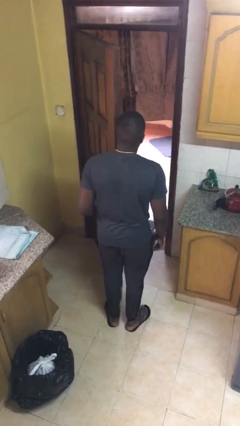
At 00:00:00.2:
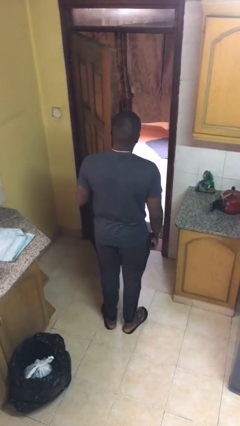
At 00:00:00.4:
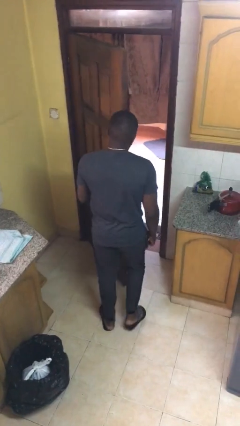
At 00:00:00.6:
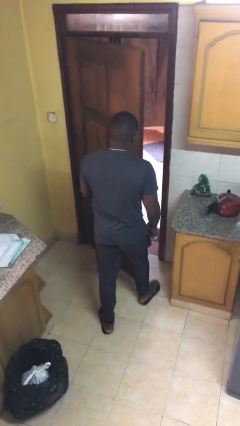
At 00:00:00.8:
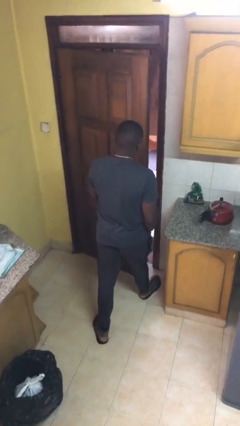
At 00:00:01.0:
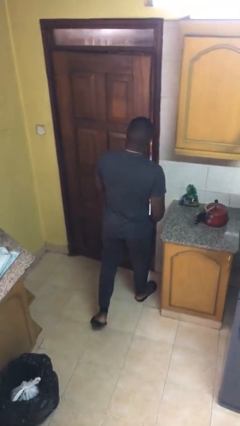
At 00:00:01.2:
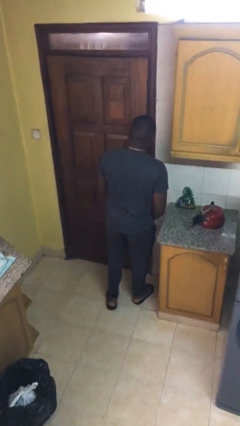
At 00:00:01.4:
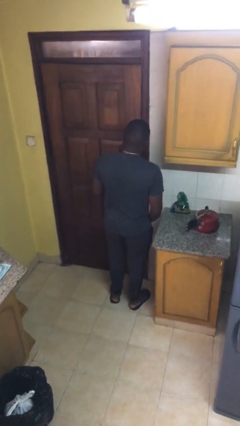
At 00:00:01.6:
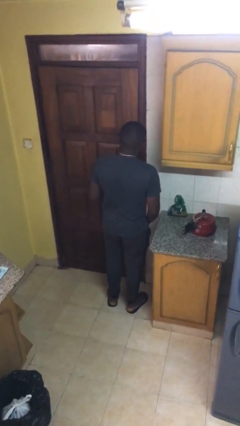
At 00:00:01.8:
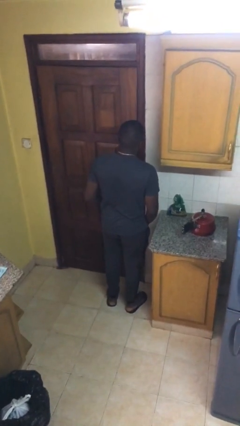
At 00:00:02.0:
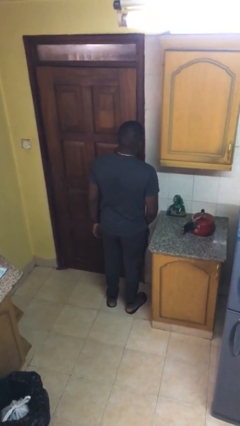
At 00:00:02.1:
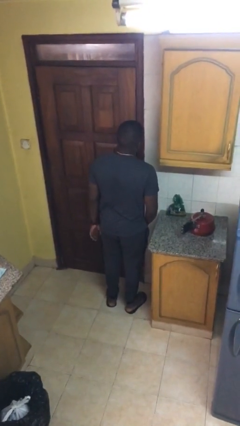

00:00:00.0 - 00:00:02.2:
person closes facility door

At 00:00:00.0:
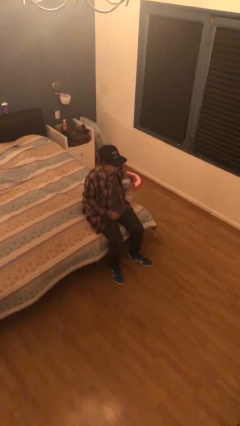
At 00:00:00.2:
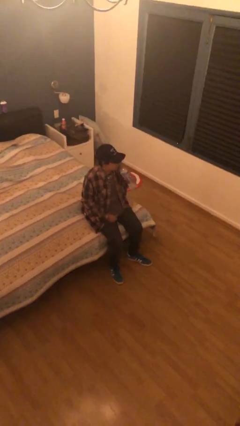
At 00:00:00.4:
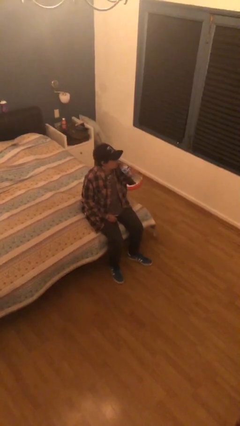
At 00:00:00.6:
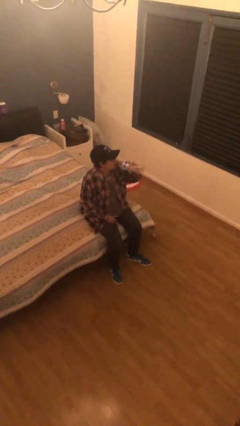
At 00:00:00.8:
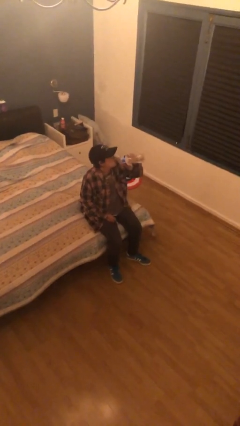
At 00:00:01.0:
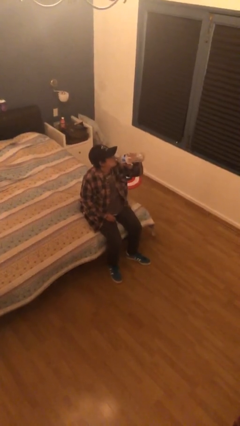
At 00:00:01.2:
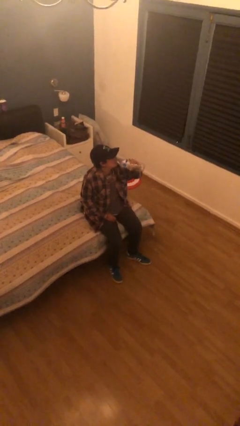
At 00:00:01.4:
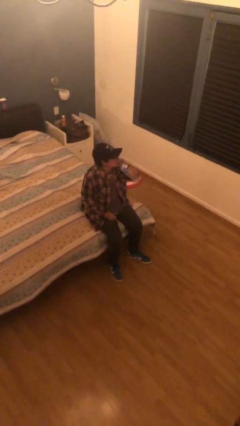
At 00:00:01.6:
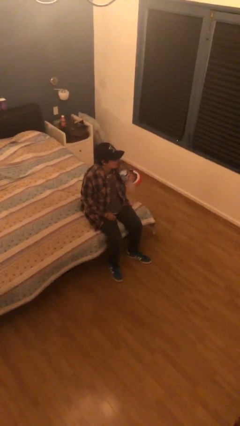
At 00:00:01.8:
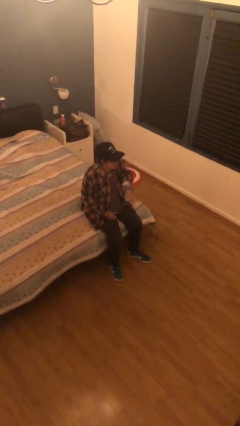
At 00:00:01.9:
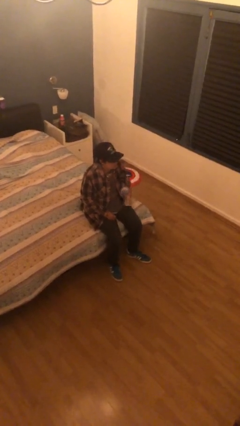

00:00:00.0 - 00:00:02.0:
person drinks from bottle

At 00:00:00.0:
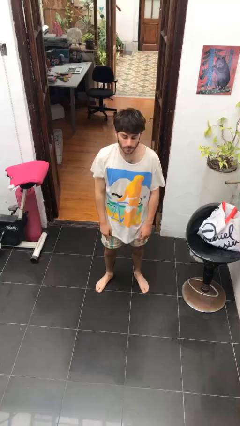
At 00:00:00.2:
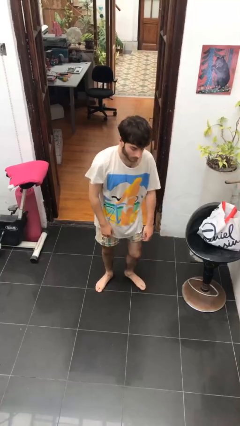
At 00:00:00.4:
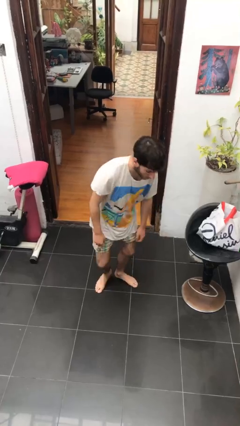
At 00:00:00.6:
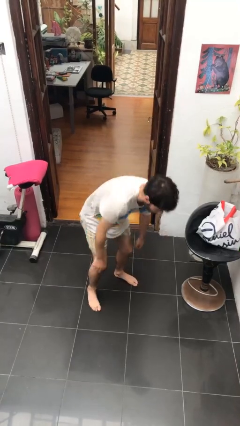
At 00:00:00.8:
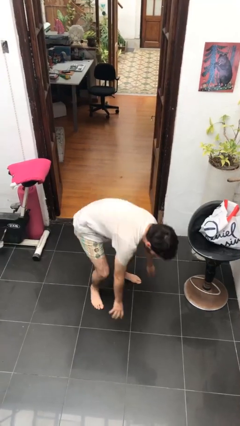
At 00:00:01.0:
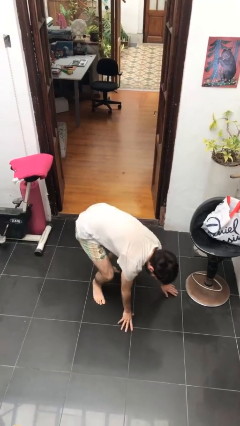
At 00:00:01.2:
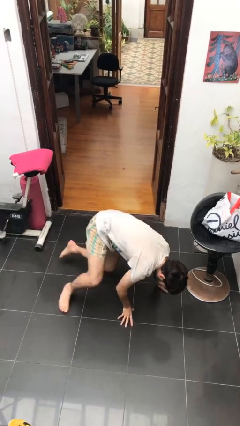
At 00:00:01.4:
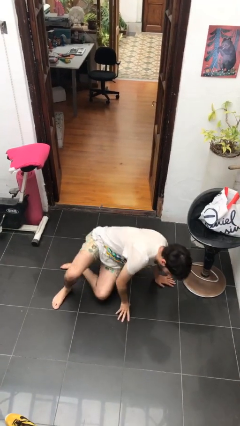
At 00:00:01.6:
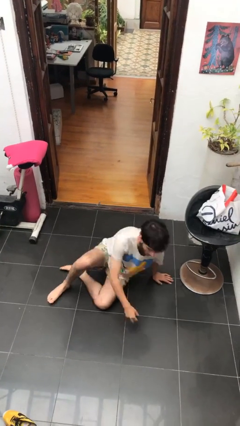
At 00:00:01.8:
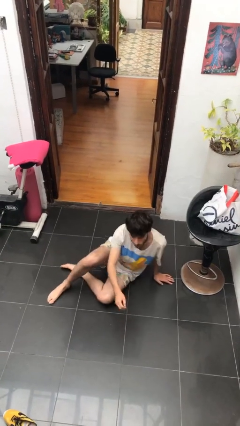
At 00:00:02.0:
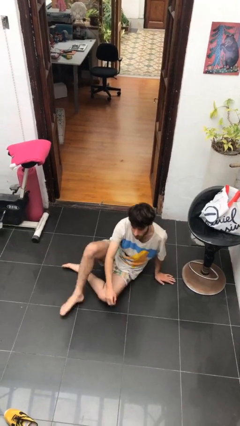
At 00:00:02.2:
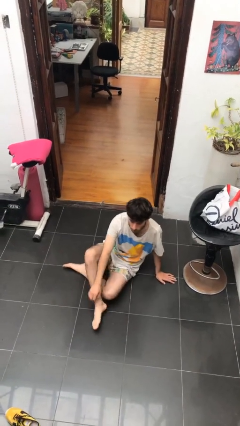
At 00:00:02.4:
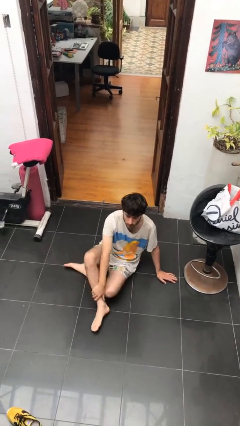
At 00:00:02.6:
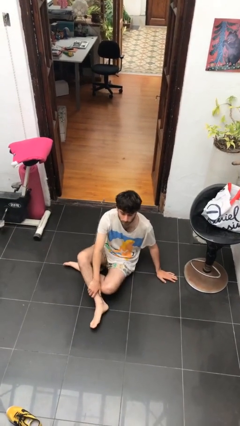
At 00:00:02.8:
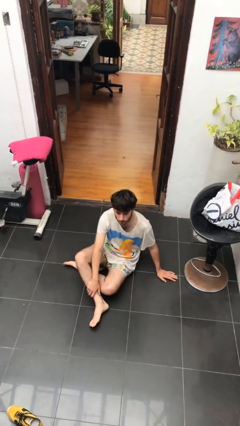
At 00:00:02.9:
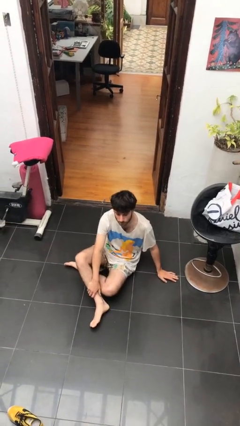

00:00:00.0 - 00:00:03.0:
person sits down

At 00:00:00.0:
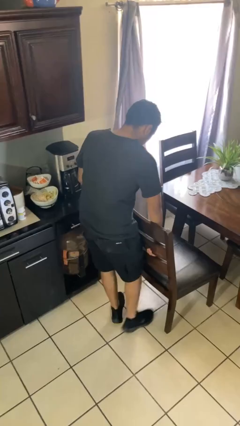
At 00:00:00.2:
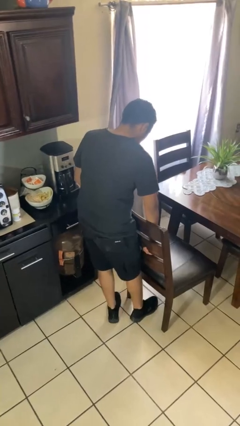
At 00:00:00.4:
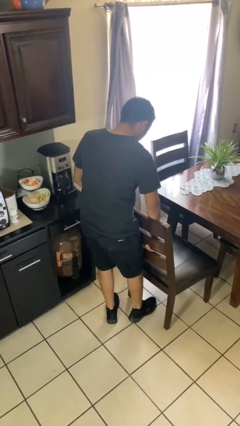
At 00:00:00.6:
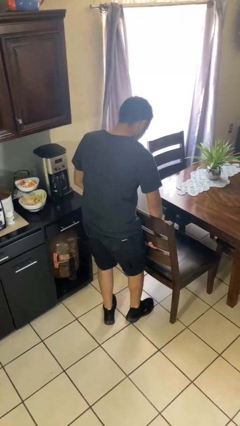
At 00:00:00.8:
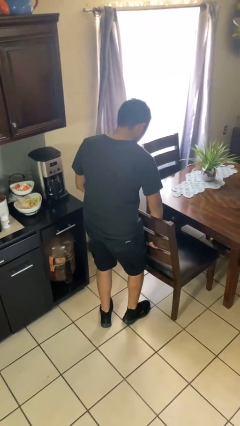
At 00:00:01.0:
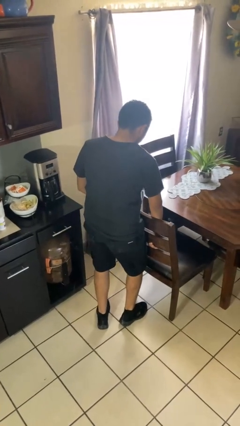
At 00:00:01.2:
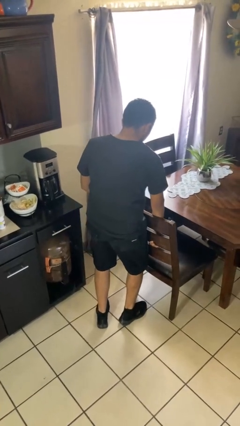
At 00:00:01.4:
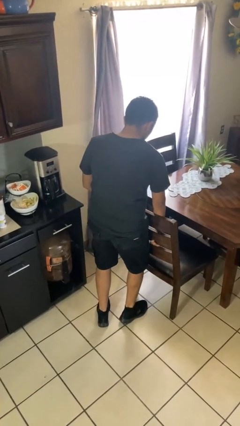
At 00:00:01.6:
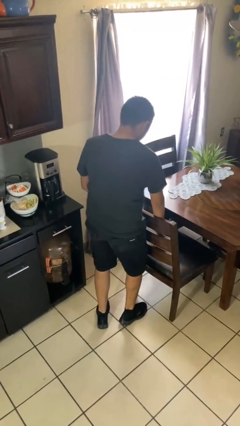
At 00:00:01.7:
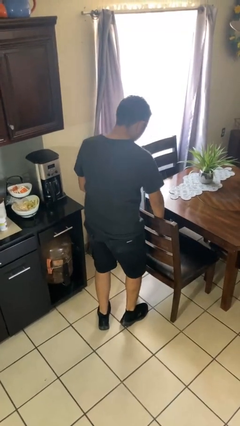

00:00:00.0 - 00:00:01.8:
person pushes in chair

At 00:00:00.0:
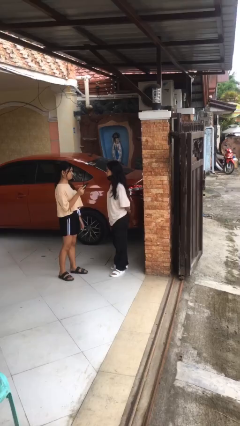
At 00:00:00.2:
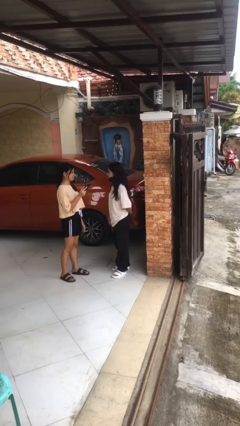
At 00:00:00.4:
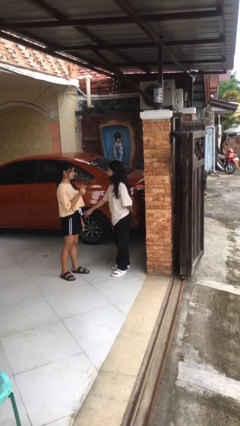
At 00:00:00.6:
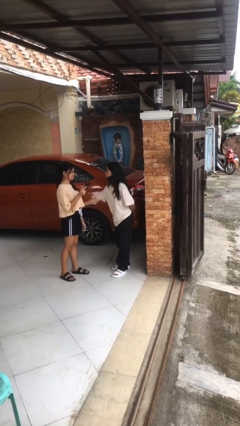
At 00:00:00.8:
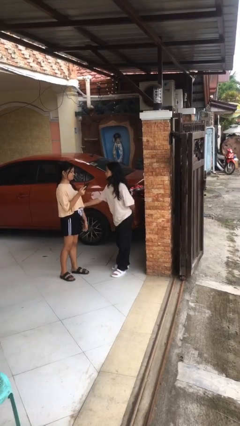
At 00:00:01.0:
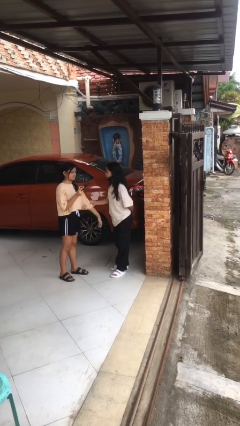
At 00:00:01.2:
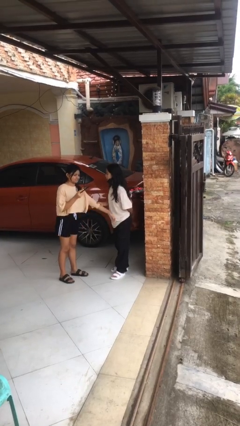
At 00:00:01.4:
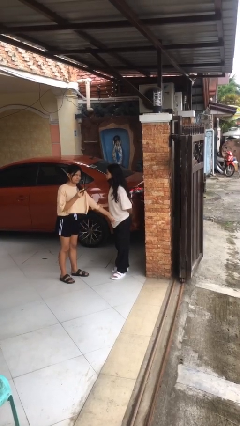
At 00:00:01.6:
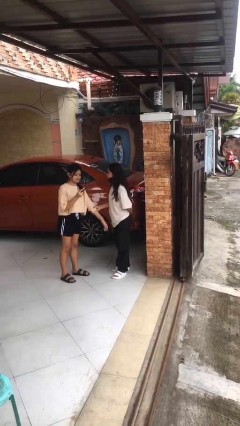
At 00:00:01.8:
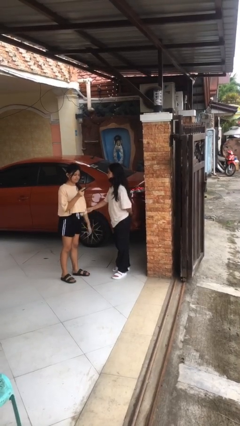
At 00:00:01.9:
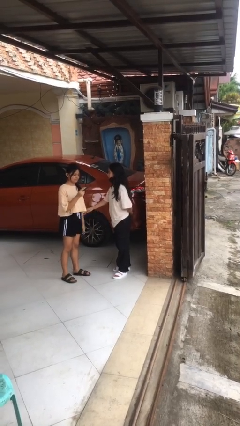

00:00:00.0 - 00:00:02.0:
person grabs person by forearm

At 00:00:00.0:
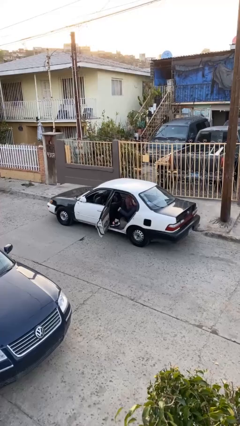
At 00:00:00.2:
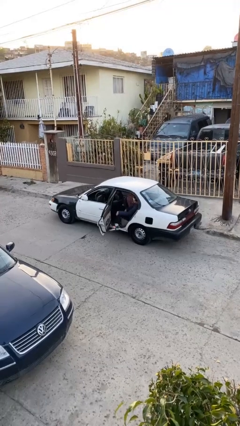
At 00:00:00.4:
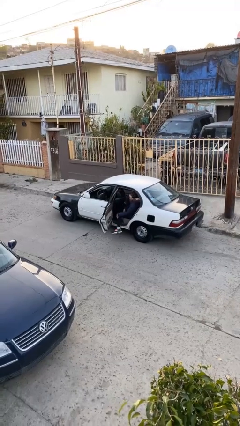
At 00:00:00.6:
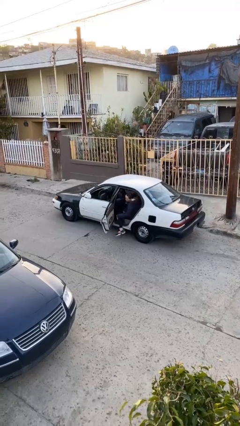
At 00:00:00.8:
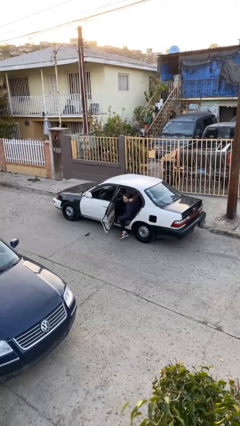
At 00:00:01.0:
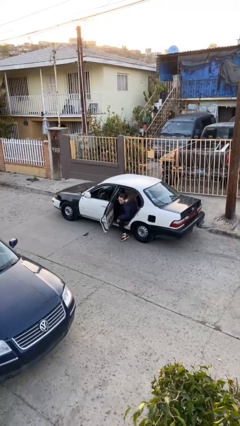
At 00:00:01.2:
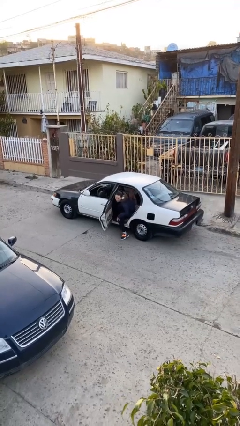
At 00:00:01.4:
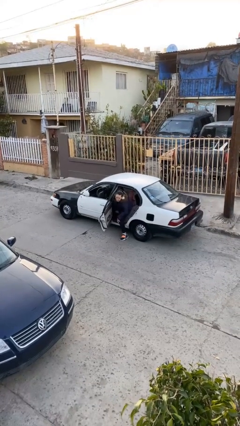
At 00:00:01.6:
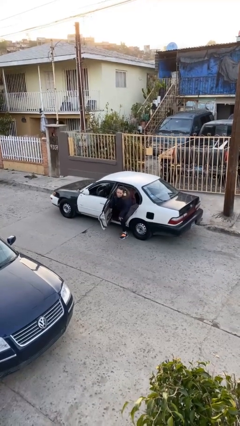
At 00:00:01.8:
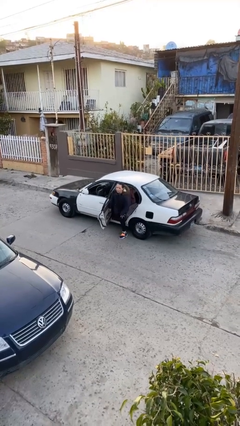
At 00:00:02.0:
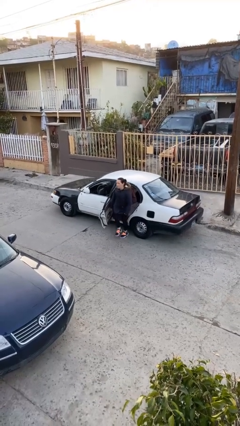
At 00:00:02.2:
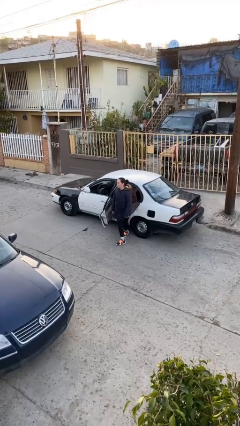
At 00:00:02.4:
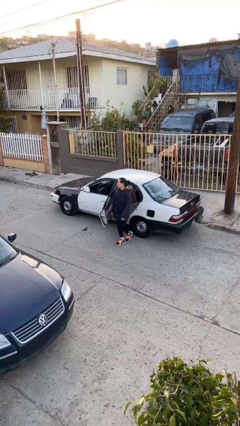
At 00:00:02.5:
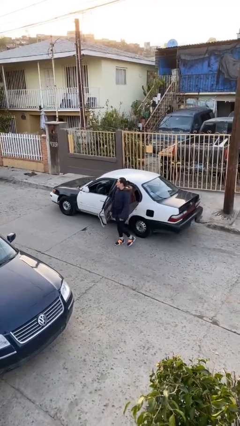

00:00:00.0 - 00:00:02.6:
person exits car

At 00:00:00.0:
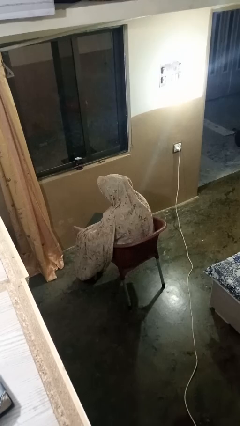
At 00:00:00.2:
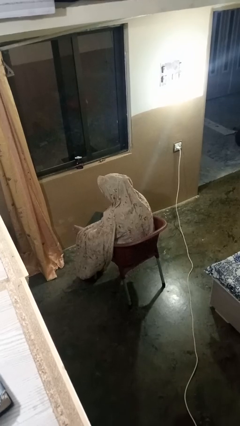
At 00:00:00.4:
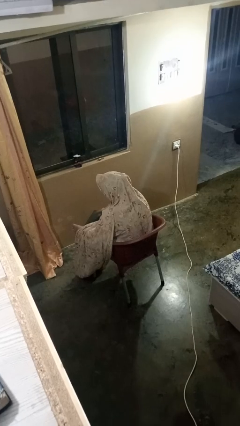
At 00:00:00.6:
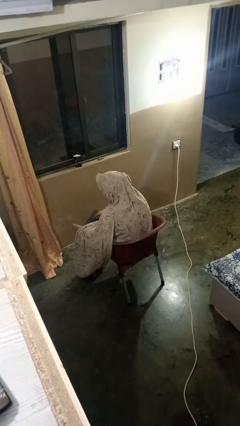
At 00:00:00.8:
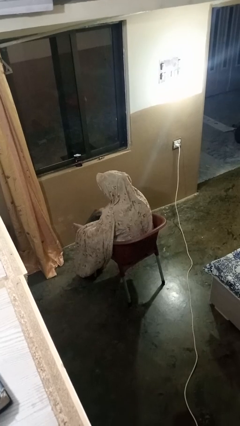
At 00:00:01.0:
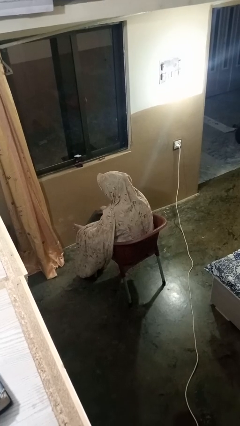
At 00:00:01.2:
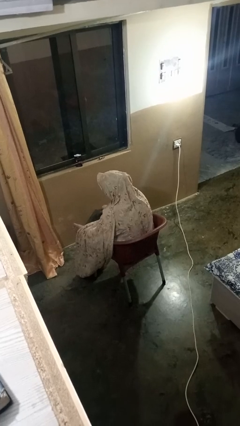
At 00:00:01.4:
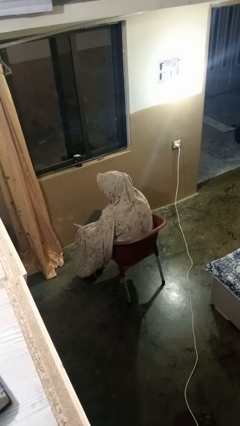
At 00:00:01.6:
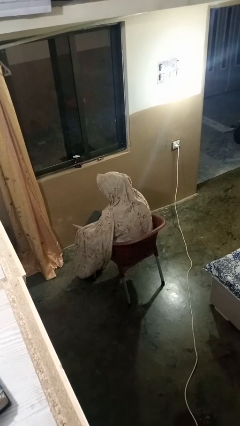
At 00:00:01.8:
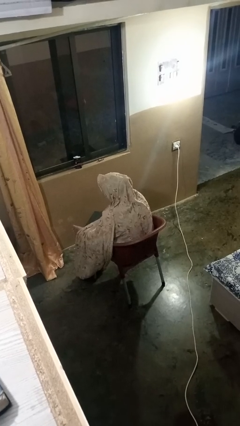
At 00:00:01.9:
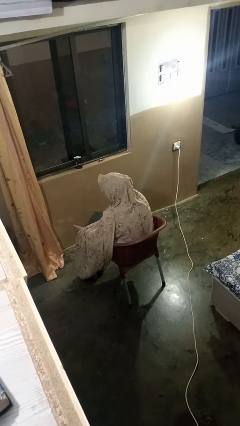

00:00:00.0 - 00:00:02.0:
person interacts with tablet

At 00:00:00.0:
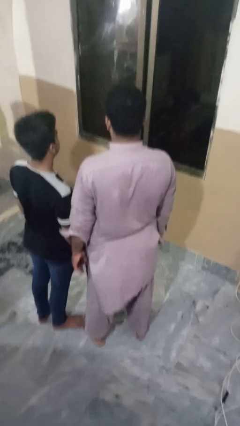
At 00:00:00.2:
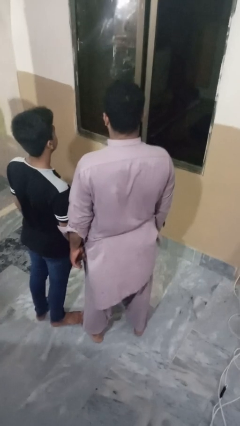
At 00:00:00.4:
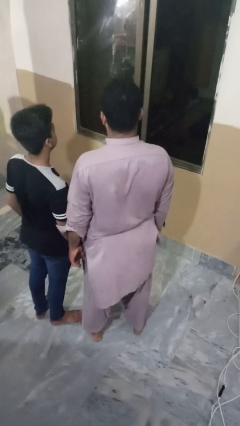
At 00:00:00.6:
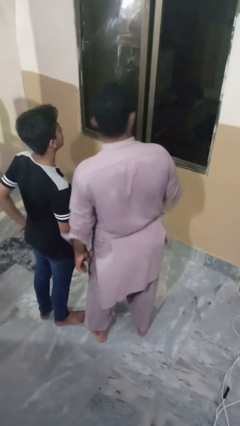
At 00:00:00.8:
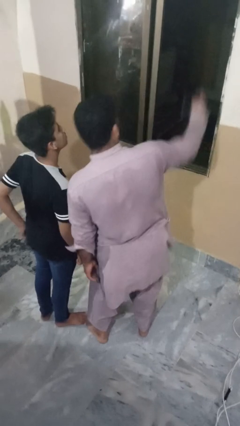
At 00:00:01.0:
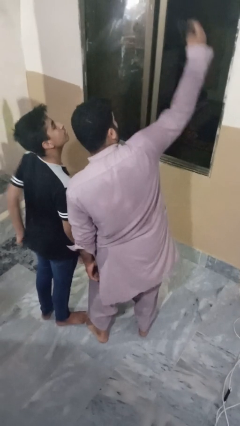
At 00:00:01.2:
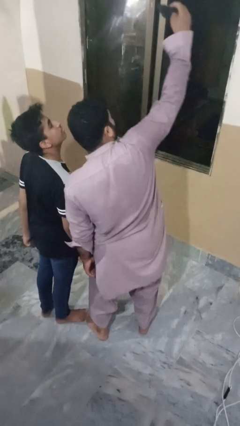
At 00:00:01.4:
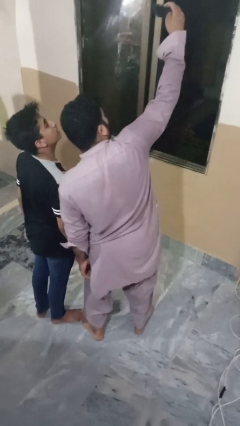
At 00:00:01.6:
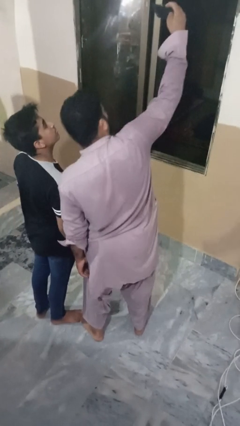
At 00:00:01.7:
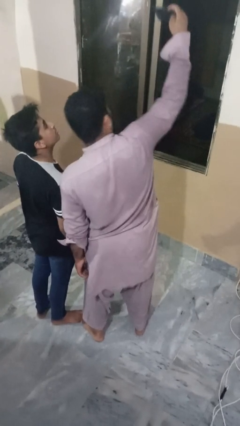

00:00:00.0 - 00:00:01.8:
person takes selfie with person
